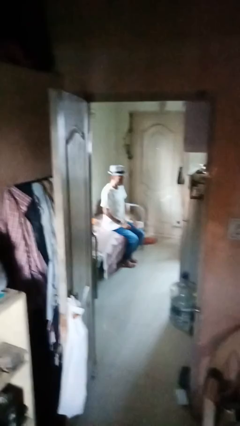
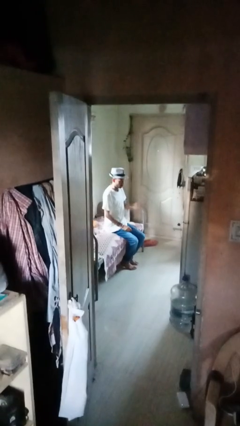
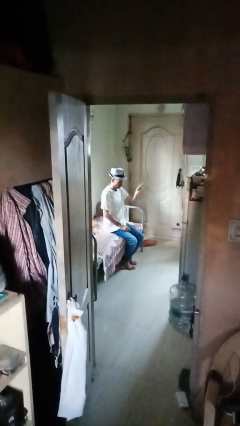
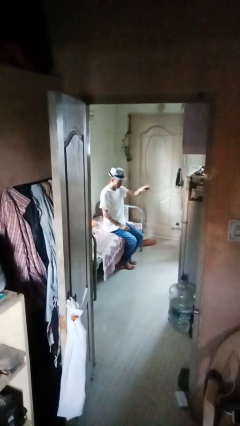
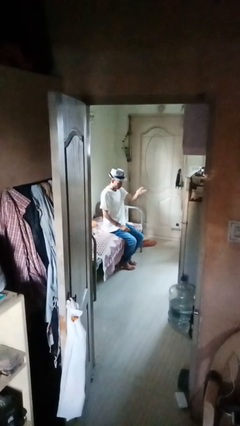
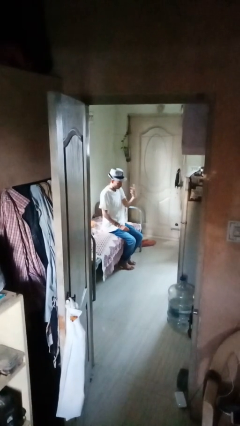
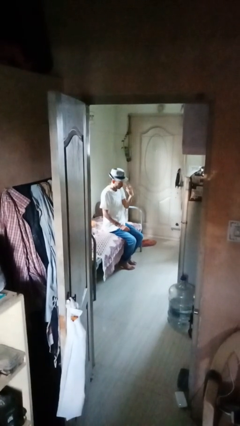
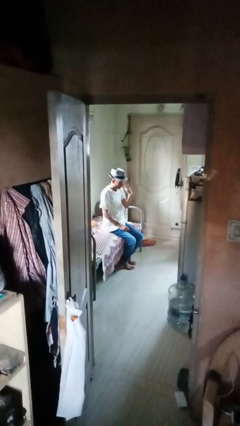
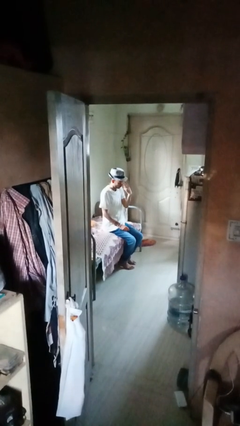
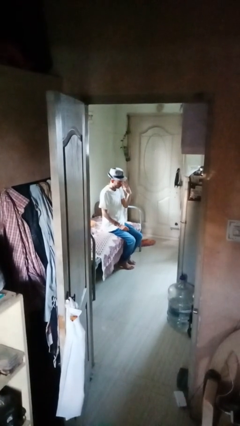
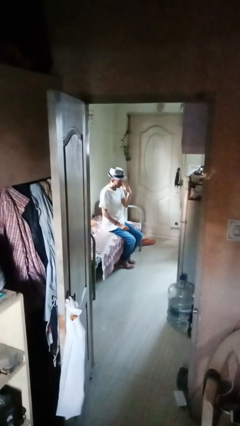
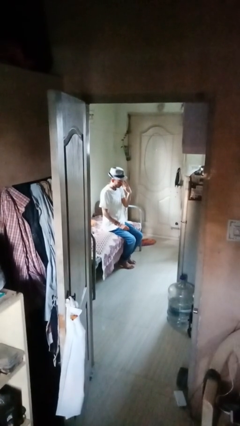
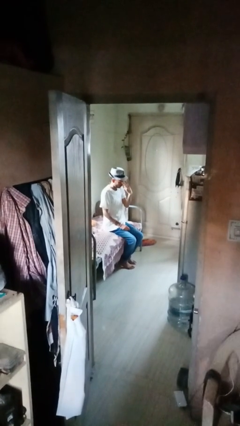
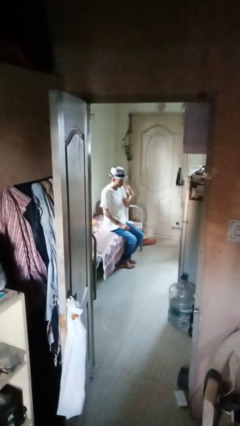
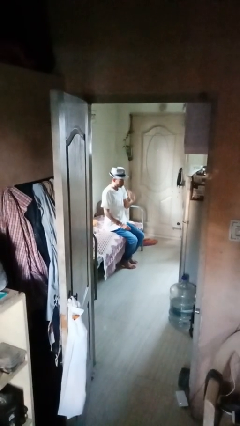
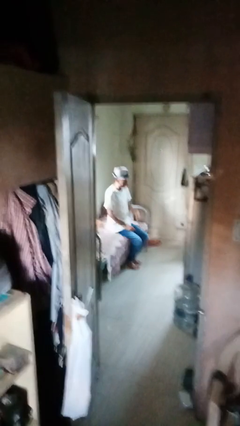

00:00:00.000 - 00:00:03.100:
person gestures watch closely

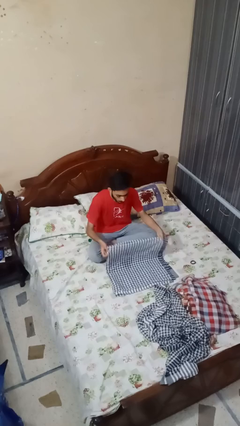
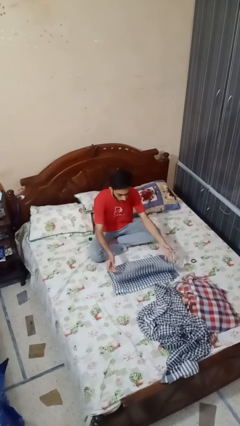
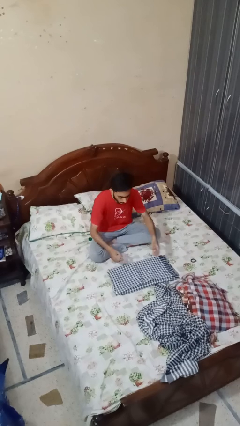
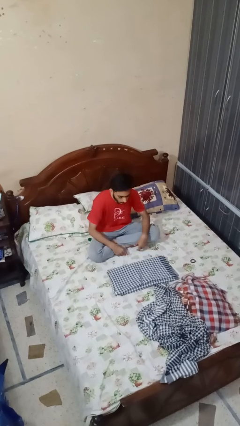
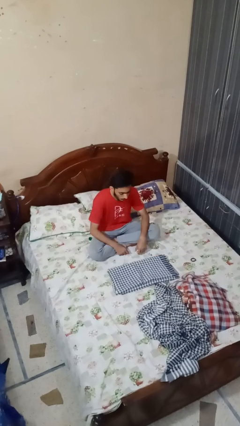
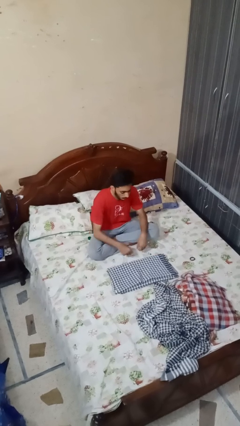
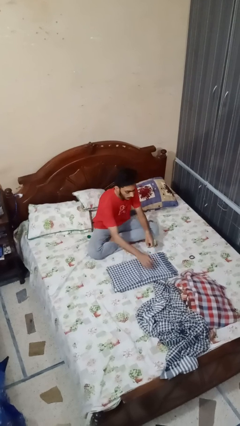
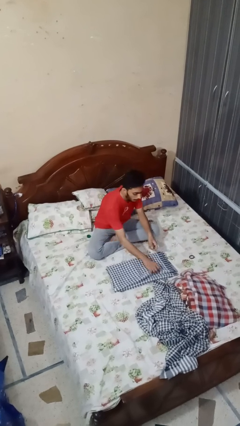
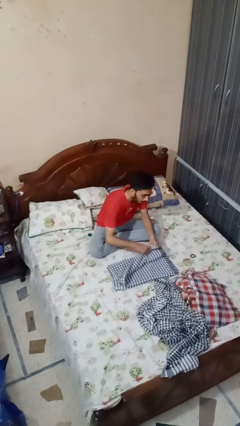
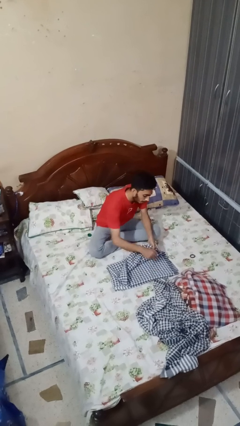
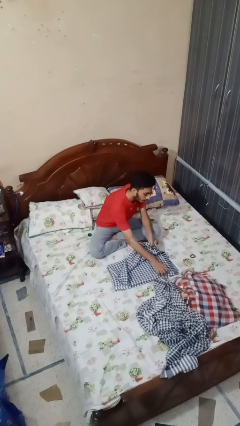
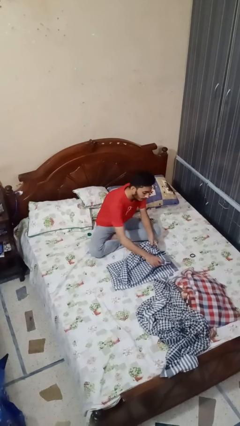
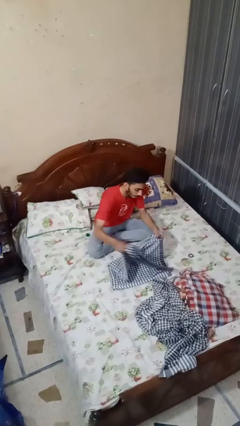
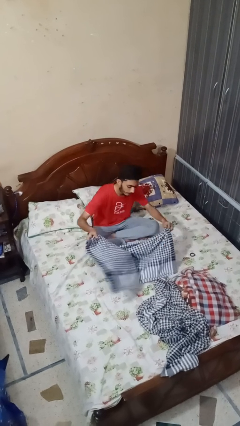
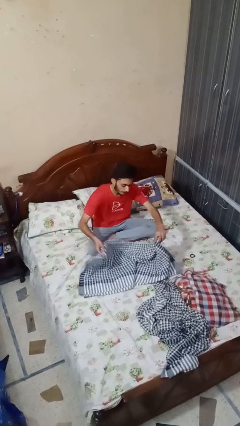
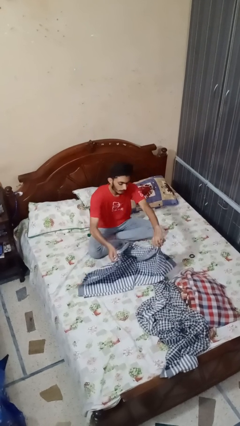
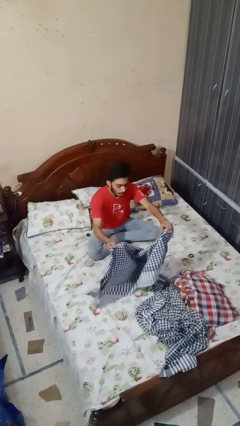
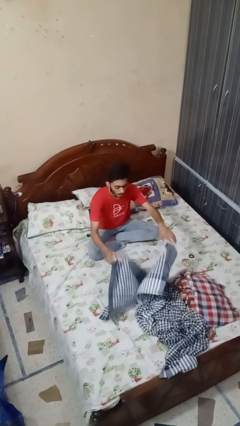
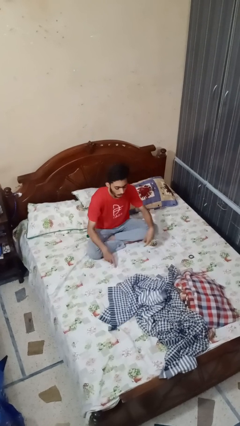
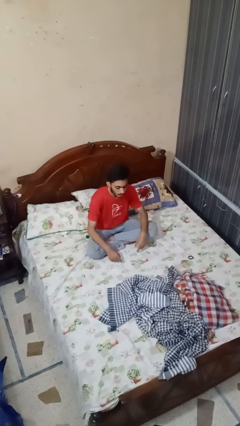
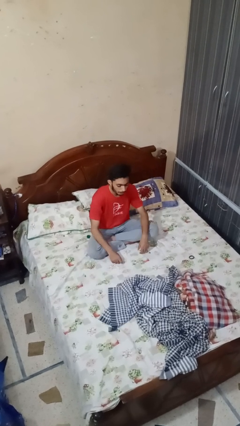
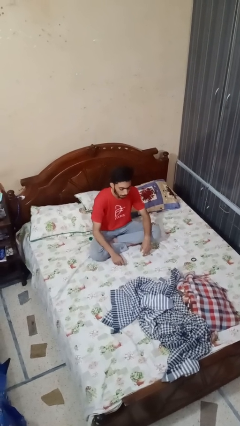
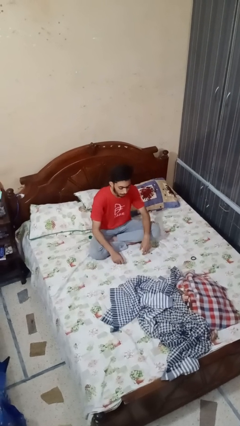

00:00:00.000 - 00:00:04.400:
person unfolds blanket

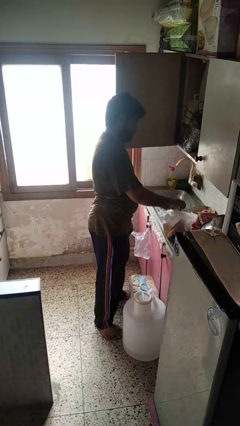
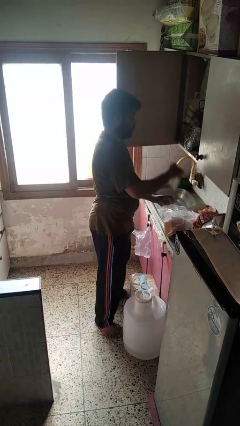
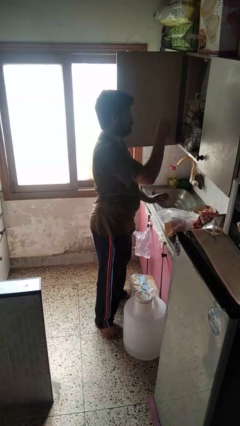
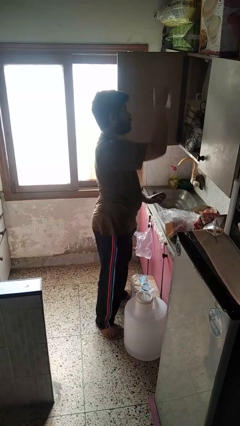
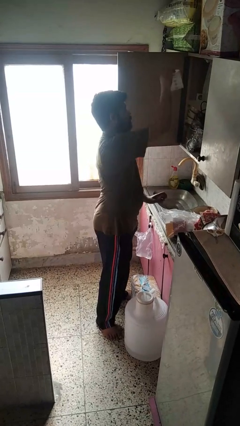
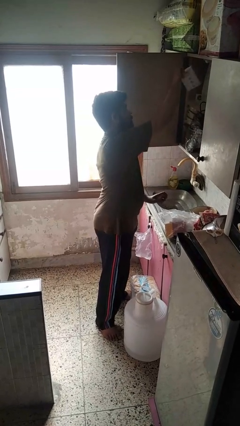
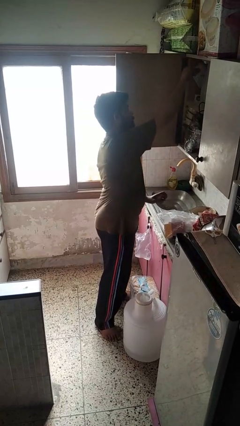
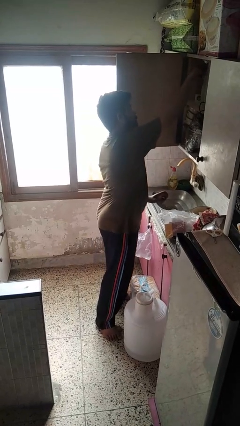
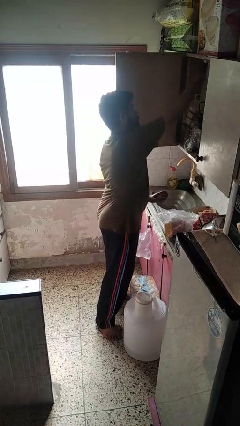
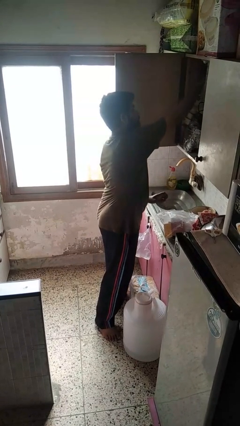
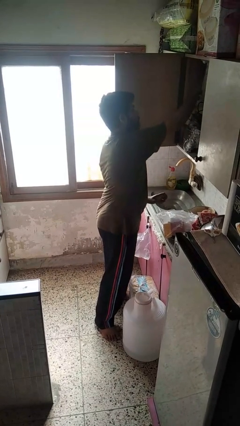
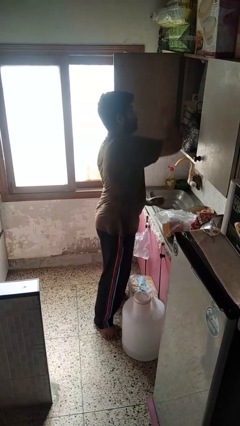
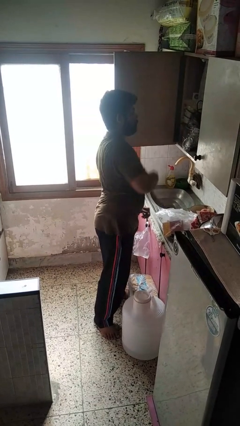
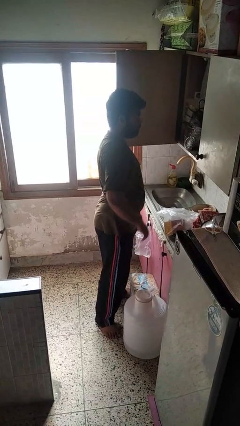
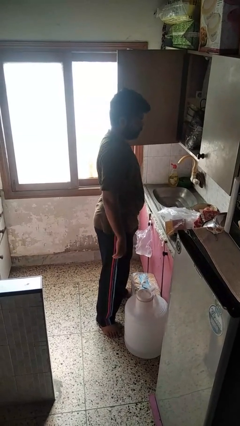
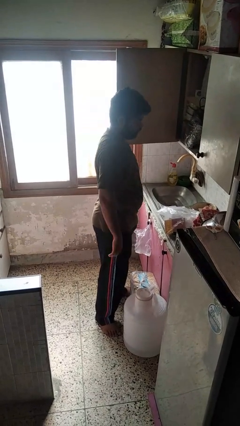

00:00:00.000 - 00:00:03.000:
person loads groceries into cabinet

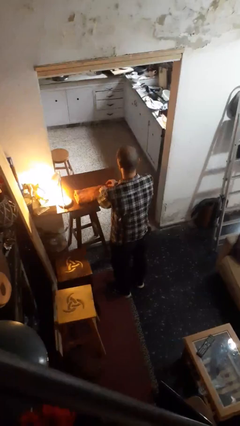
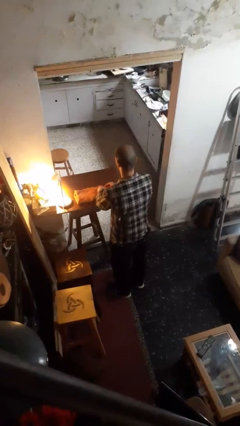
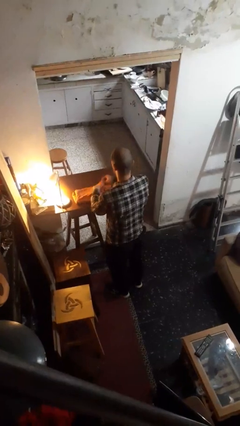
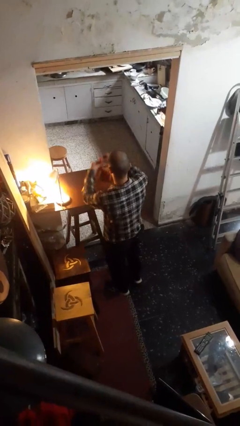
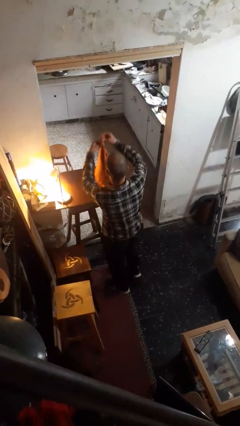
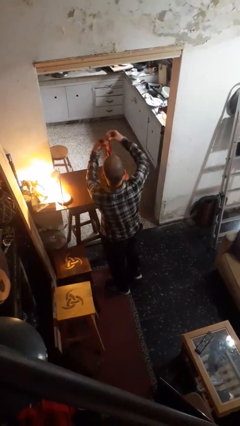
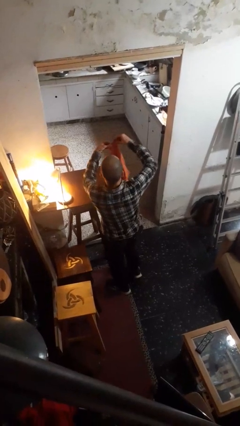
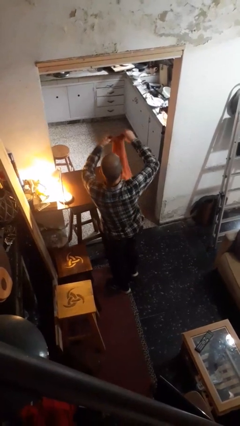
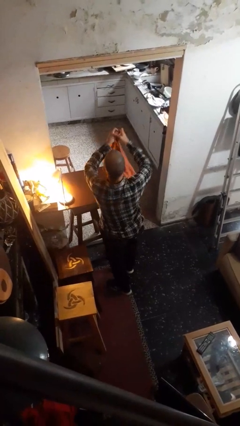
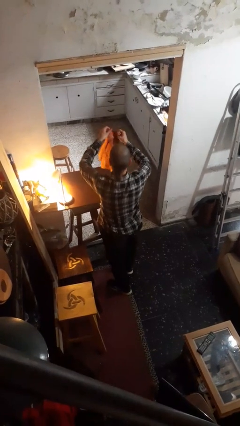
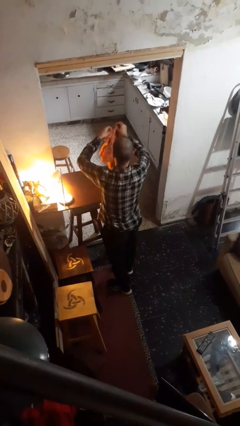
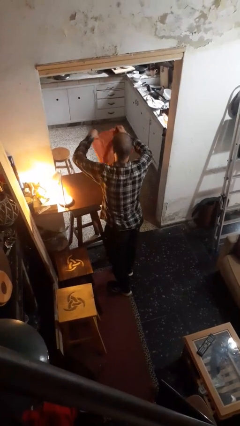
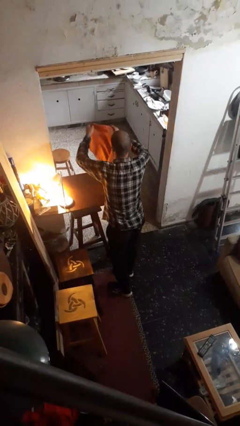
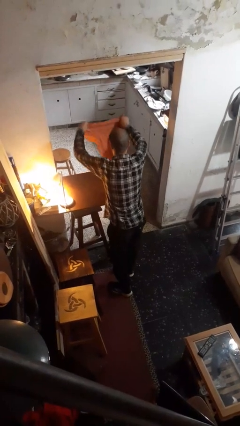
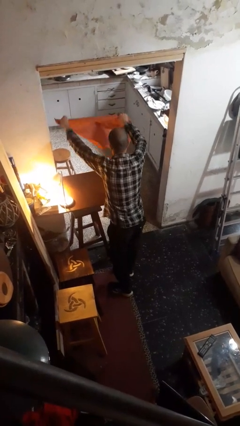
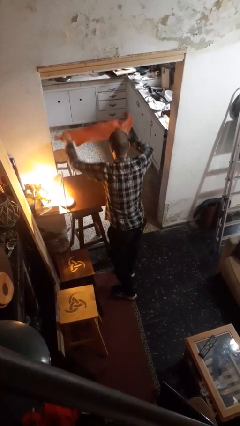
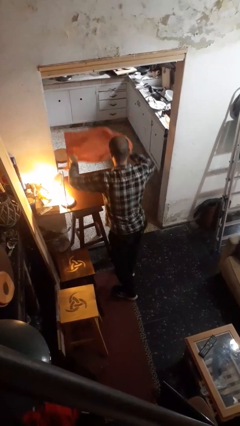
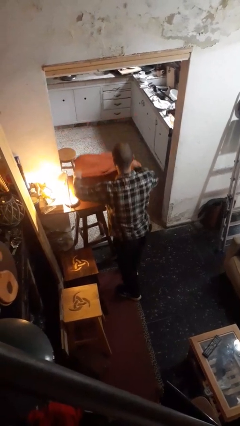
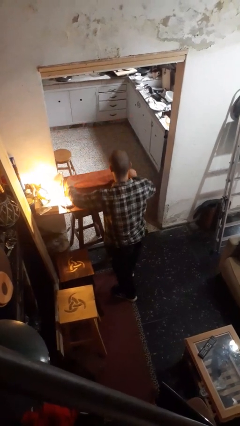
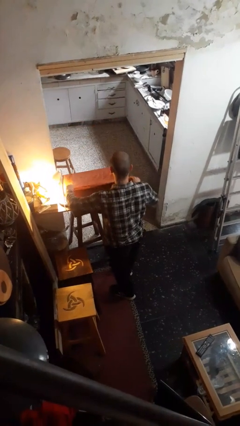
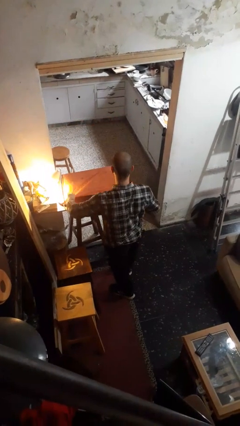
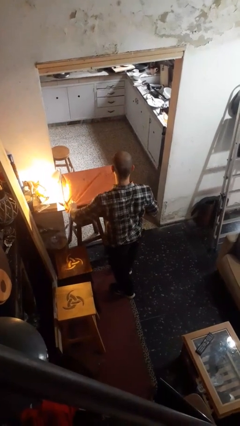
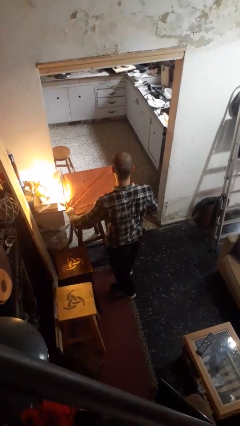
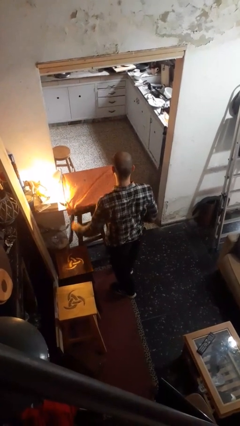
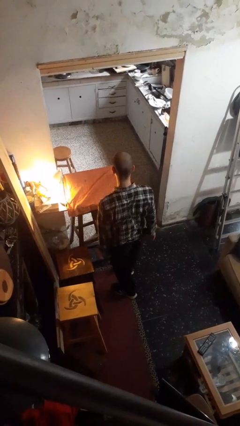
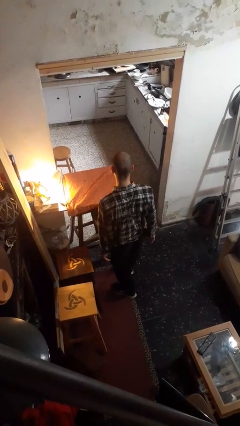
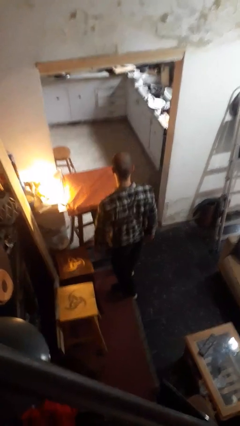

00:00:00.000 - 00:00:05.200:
person spreads tablecloth

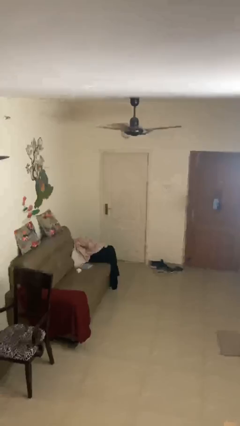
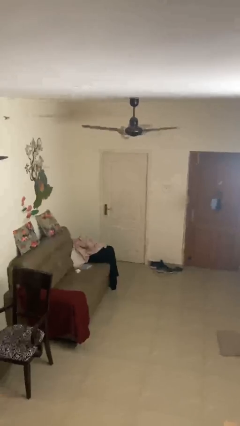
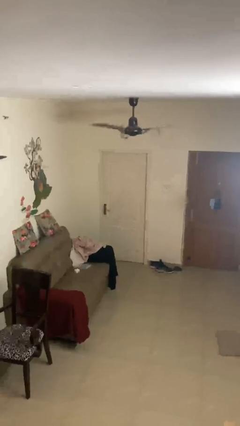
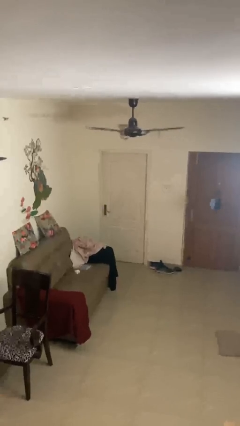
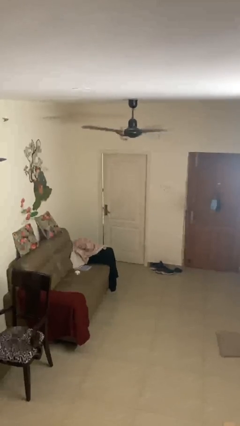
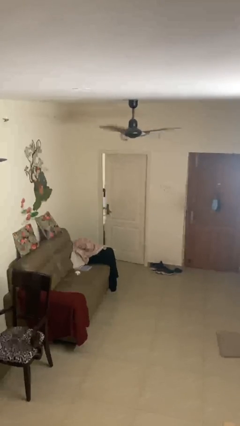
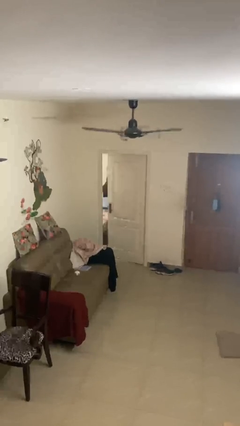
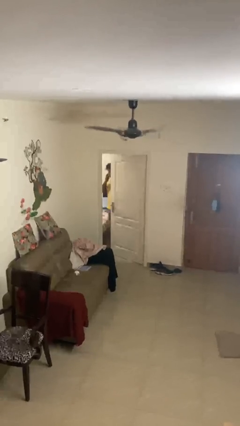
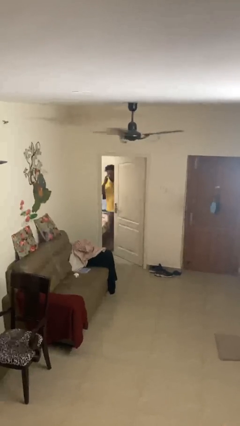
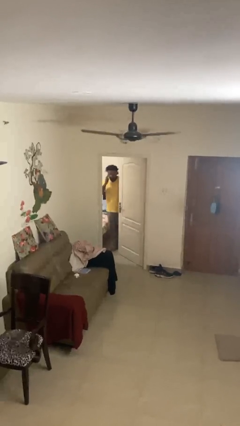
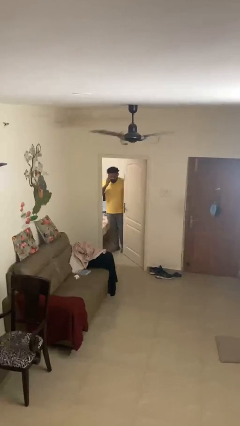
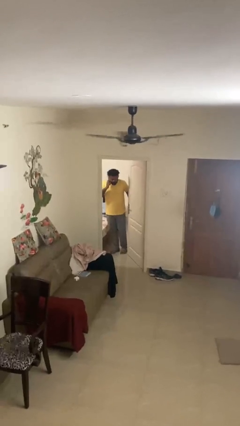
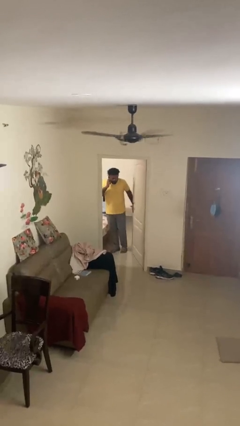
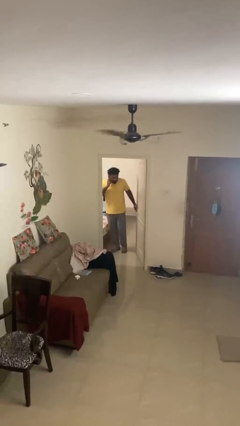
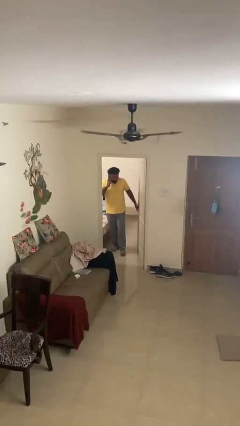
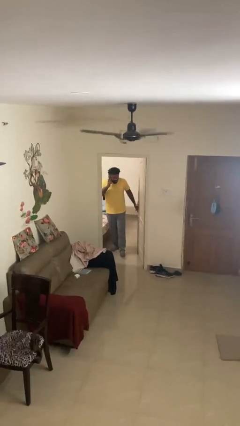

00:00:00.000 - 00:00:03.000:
person opens facility door
